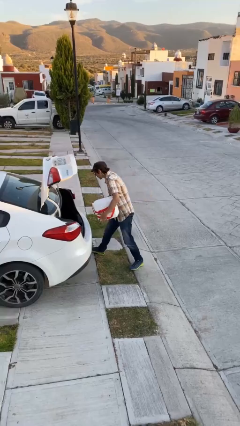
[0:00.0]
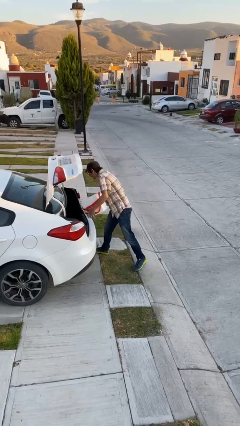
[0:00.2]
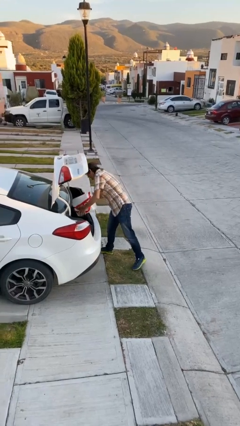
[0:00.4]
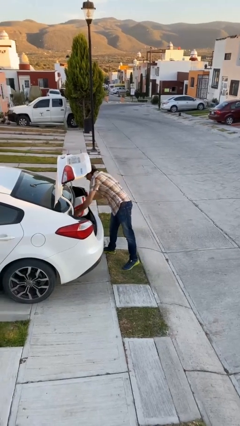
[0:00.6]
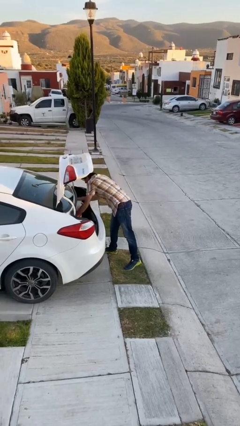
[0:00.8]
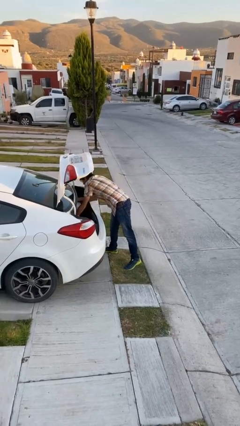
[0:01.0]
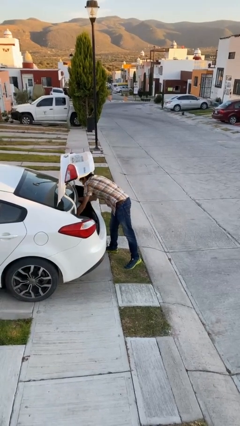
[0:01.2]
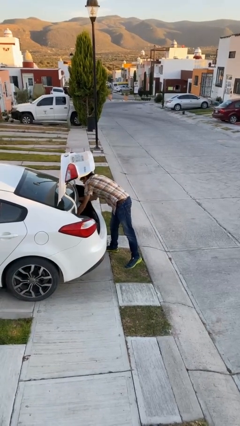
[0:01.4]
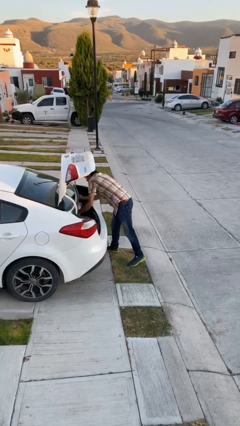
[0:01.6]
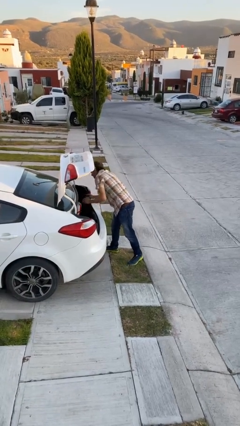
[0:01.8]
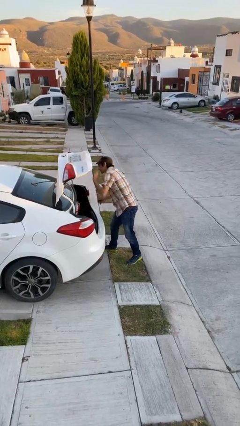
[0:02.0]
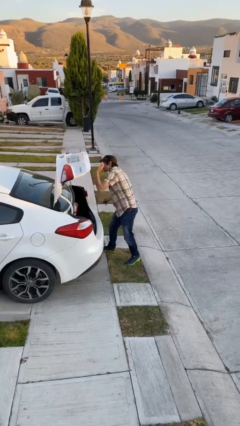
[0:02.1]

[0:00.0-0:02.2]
person loads car

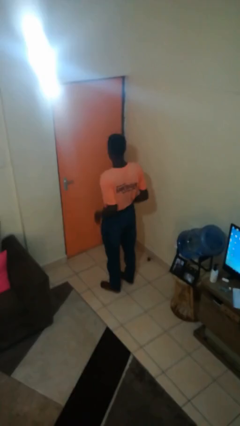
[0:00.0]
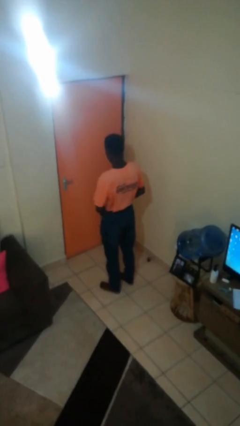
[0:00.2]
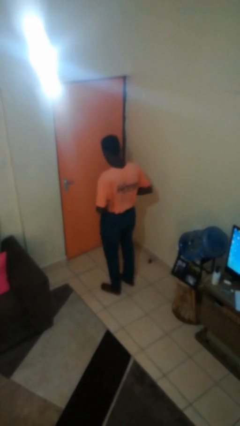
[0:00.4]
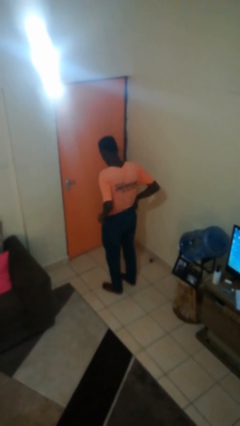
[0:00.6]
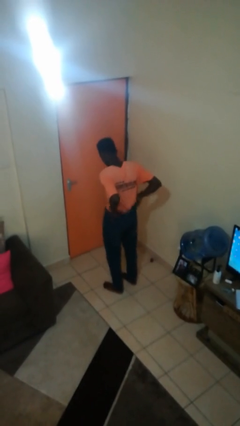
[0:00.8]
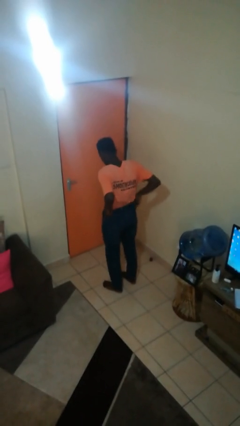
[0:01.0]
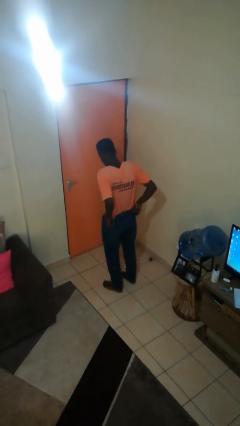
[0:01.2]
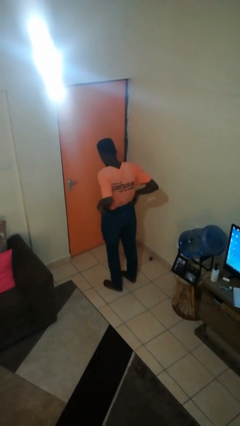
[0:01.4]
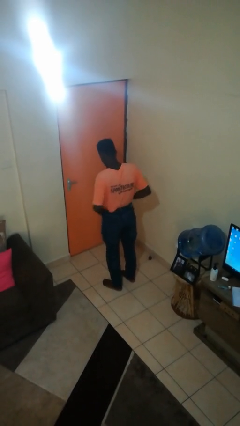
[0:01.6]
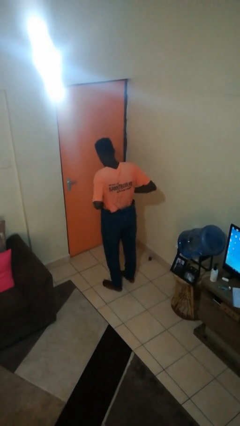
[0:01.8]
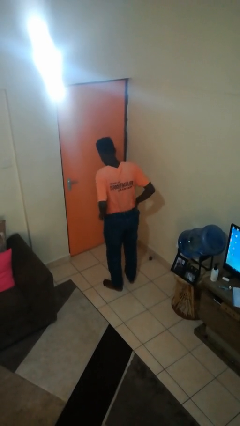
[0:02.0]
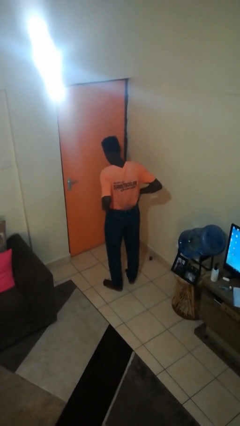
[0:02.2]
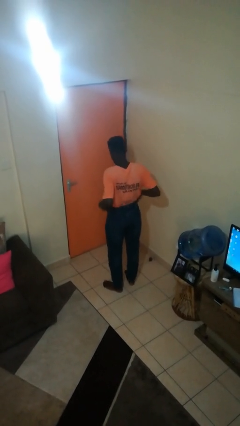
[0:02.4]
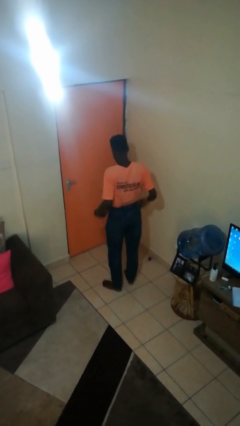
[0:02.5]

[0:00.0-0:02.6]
person hikes up pants

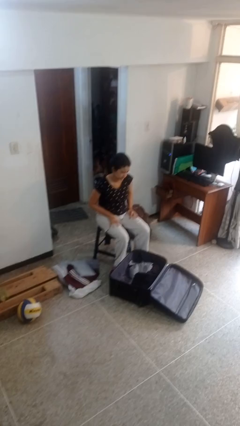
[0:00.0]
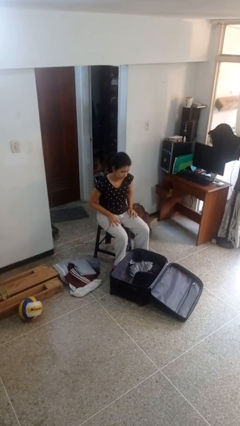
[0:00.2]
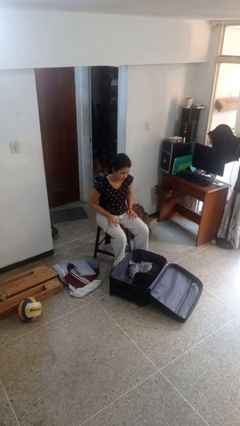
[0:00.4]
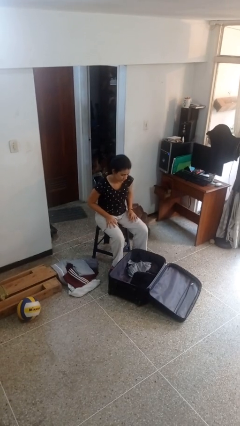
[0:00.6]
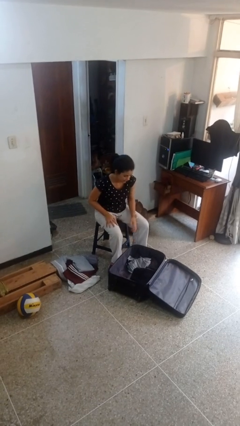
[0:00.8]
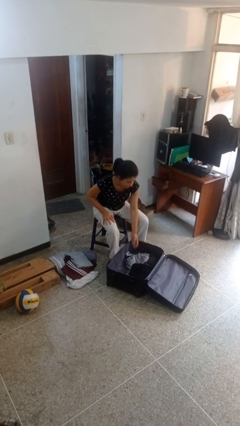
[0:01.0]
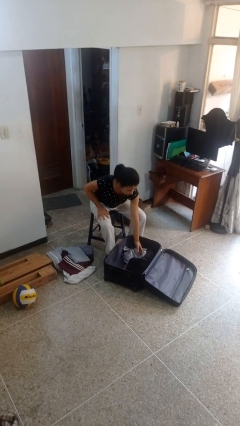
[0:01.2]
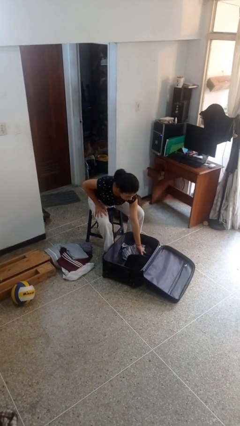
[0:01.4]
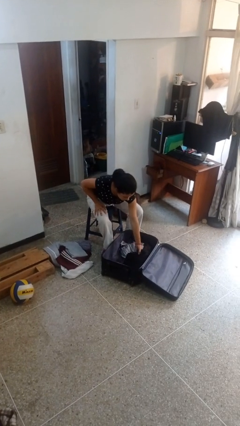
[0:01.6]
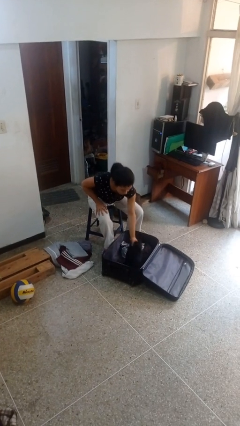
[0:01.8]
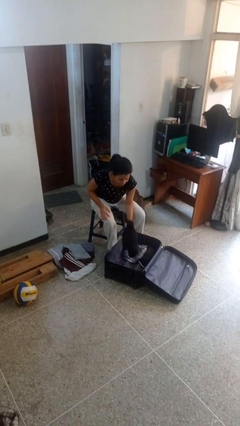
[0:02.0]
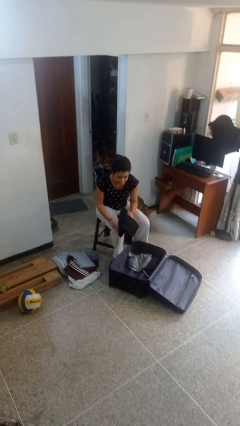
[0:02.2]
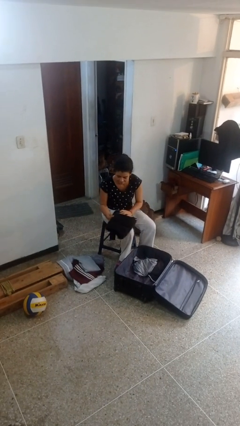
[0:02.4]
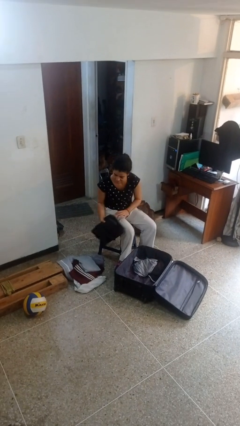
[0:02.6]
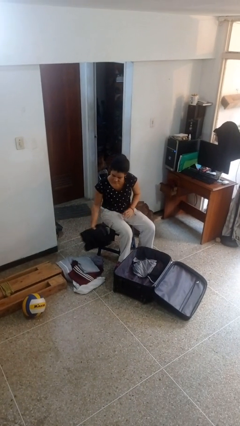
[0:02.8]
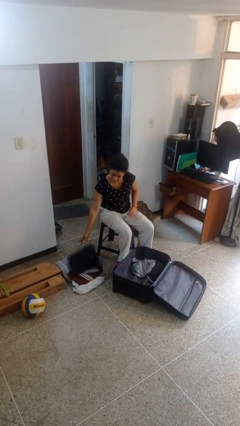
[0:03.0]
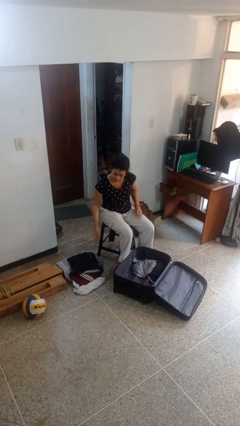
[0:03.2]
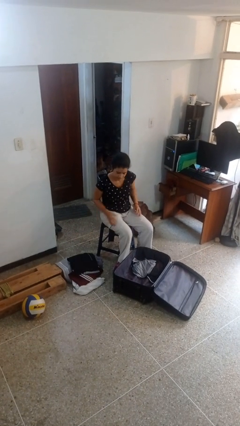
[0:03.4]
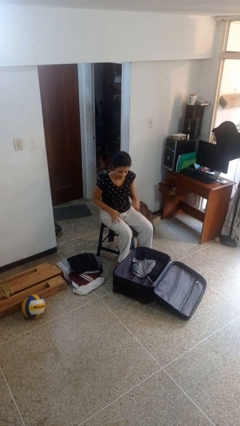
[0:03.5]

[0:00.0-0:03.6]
person unloads clothes from suitcase

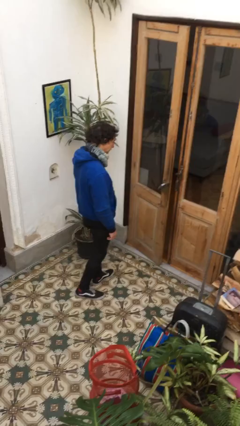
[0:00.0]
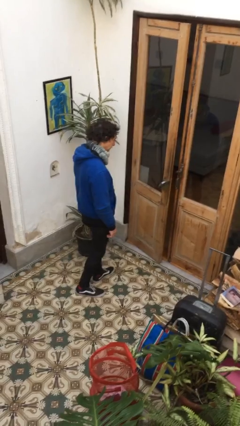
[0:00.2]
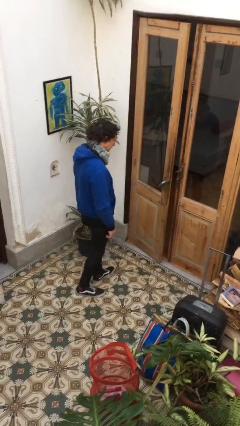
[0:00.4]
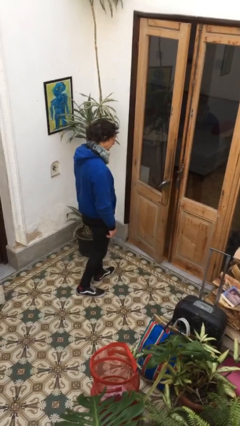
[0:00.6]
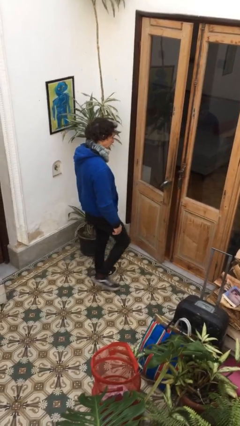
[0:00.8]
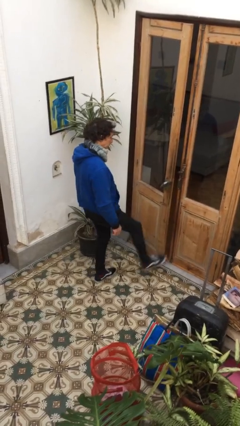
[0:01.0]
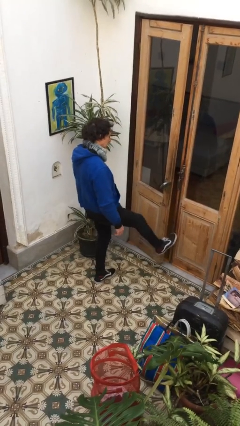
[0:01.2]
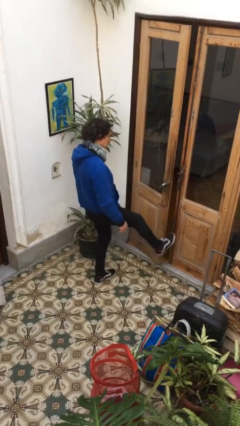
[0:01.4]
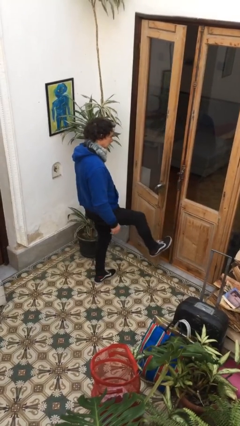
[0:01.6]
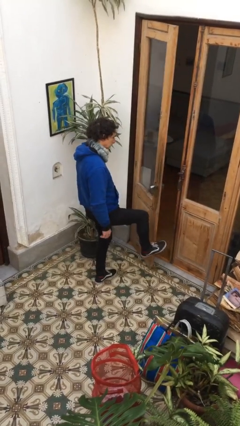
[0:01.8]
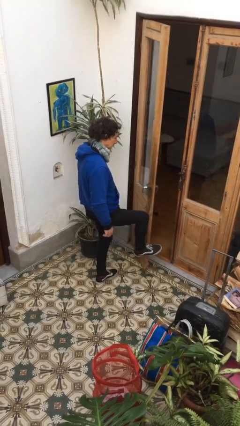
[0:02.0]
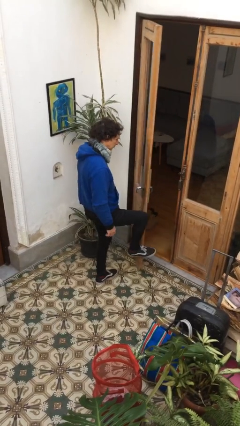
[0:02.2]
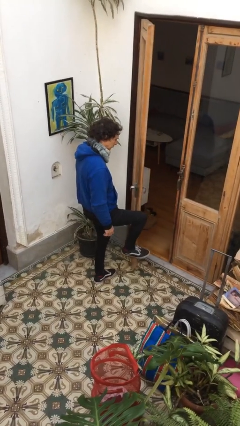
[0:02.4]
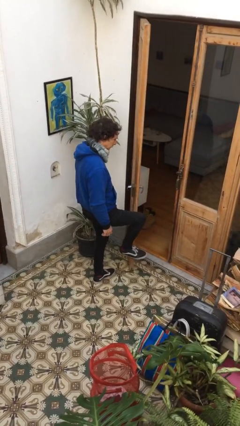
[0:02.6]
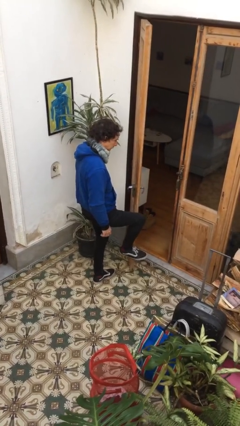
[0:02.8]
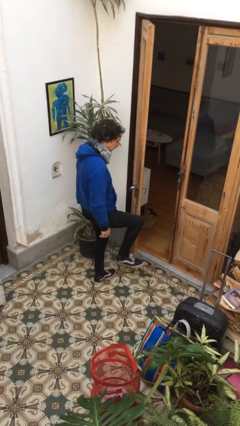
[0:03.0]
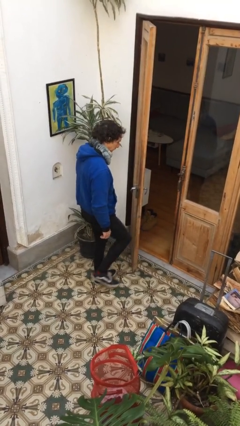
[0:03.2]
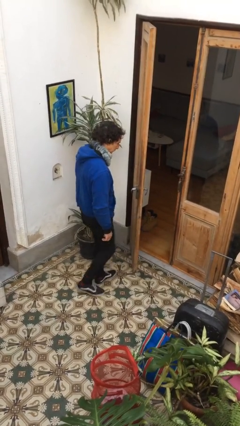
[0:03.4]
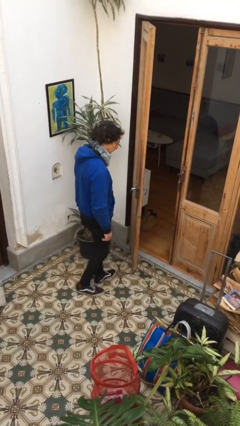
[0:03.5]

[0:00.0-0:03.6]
person opens facility door

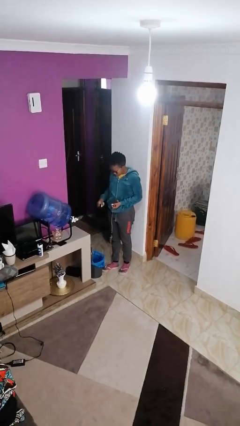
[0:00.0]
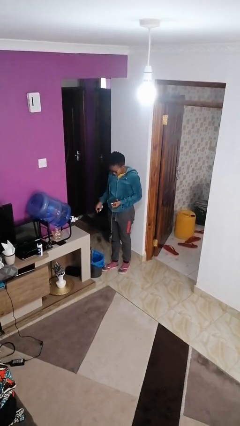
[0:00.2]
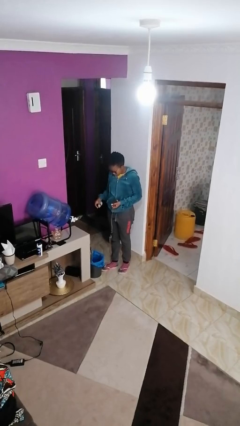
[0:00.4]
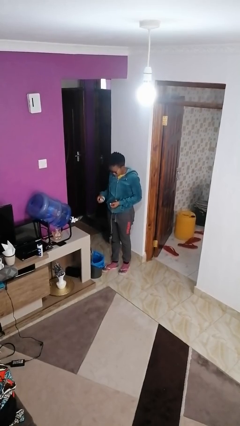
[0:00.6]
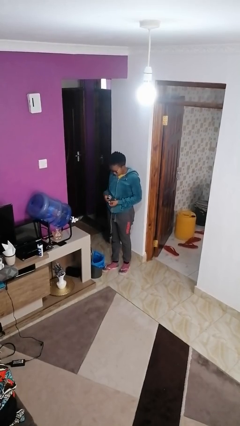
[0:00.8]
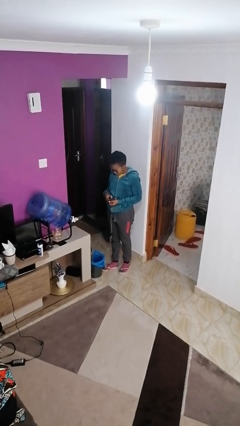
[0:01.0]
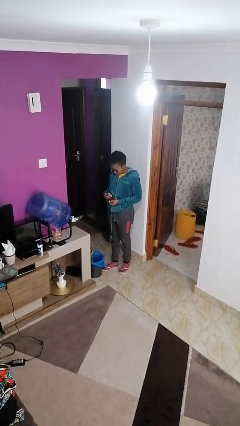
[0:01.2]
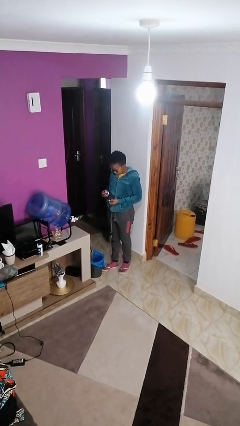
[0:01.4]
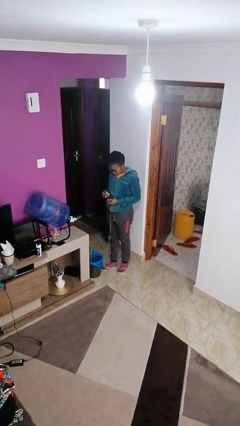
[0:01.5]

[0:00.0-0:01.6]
person discards trash

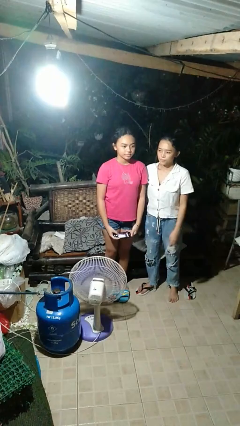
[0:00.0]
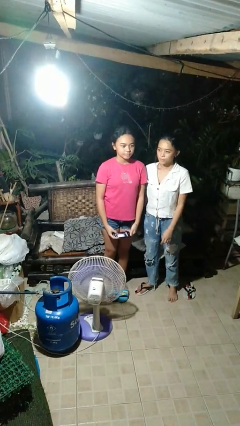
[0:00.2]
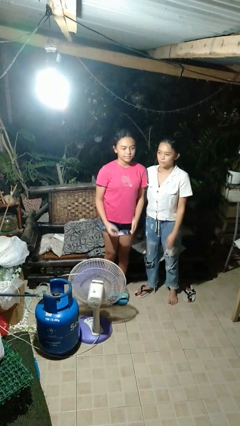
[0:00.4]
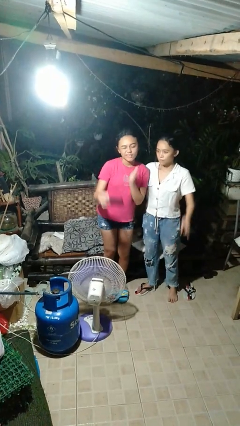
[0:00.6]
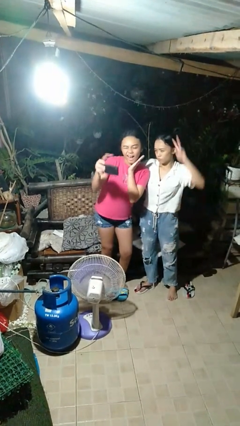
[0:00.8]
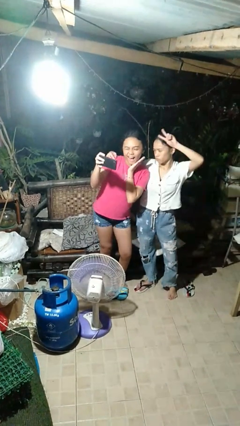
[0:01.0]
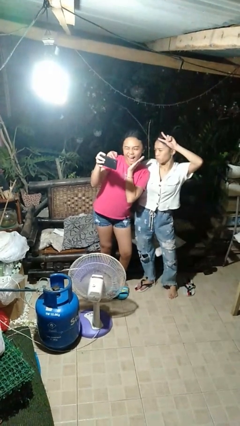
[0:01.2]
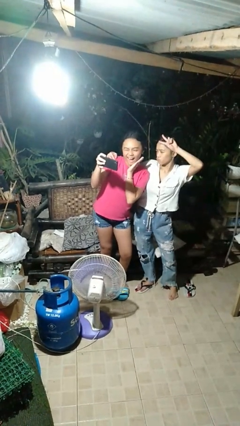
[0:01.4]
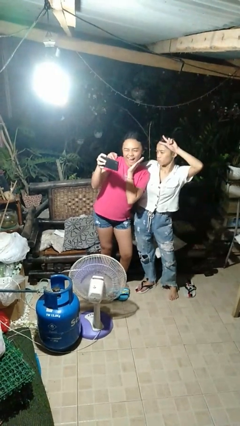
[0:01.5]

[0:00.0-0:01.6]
person takes selfie with person

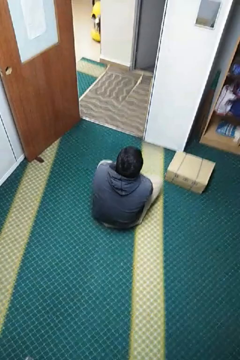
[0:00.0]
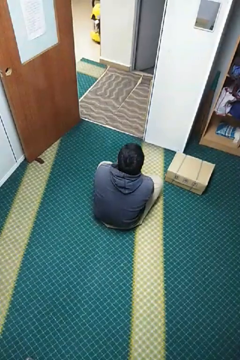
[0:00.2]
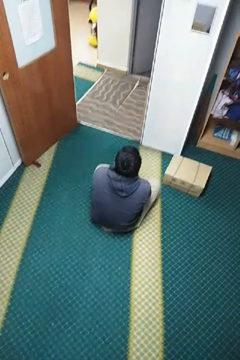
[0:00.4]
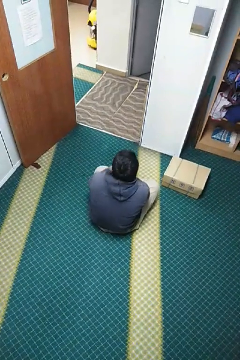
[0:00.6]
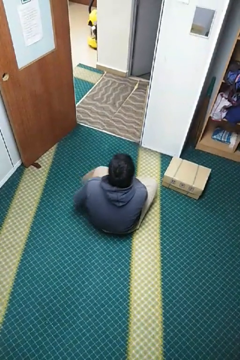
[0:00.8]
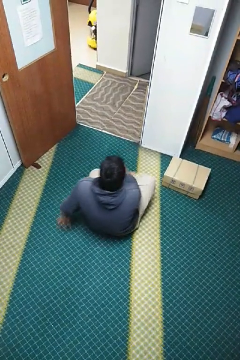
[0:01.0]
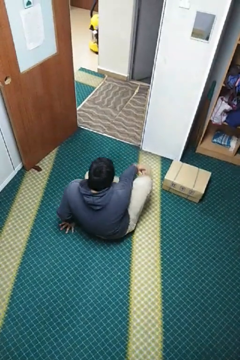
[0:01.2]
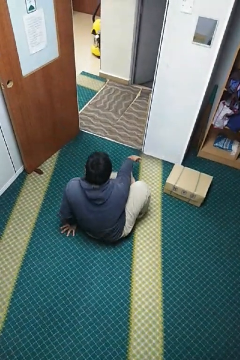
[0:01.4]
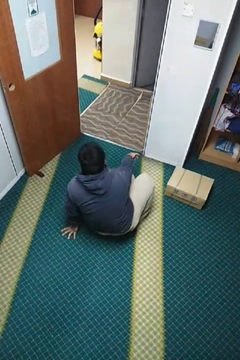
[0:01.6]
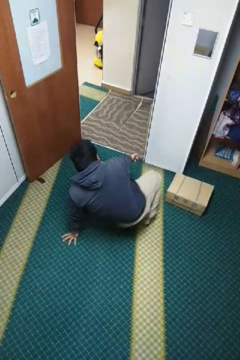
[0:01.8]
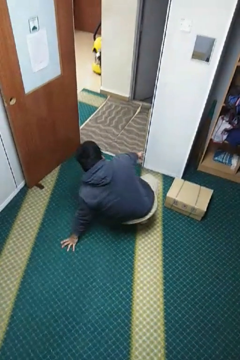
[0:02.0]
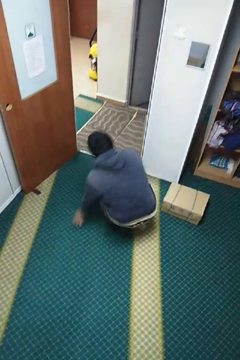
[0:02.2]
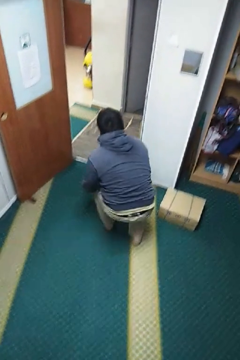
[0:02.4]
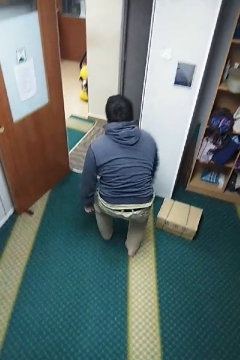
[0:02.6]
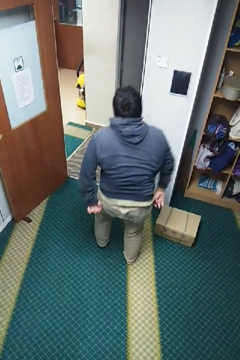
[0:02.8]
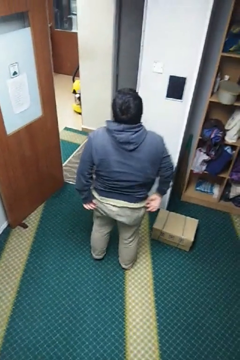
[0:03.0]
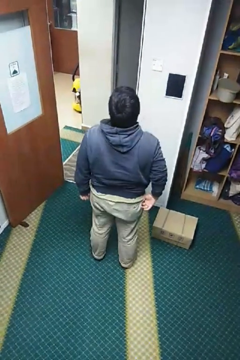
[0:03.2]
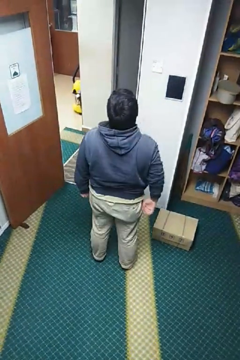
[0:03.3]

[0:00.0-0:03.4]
person stands up from floor
